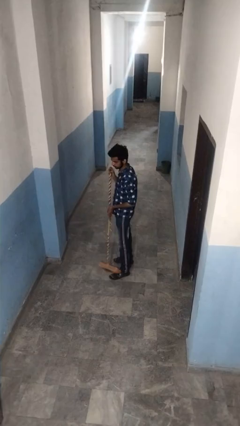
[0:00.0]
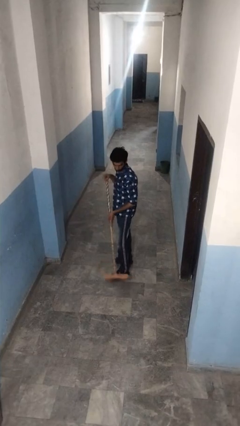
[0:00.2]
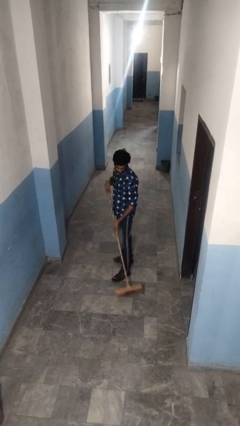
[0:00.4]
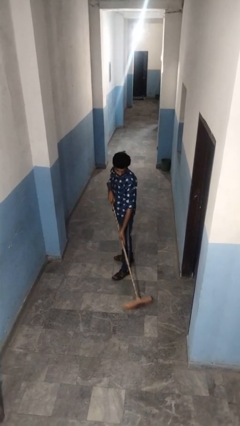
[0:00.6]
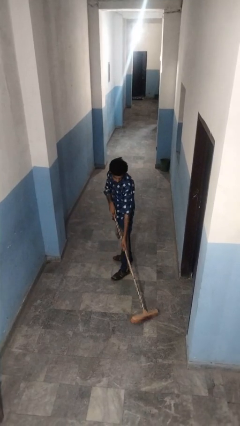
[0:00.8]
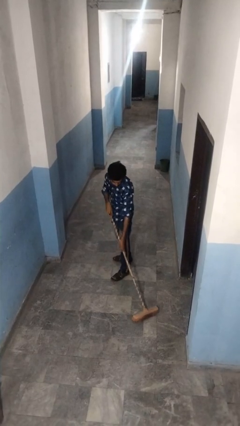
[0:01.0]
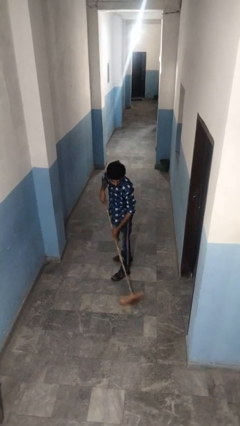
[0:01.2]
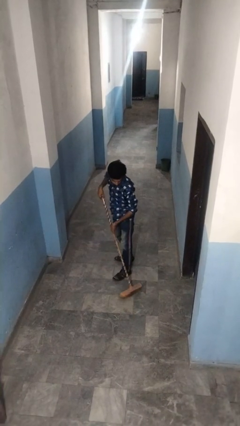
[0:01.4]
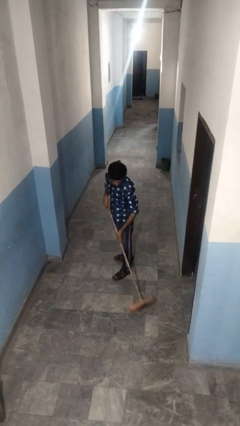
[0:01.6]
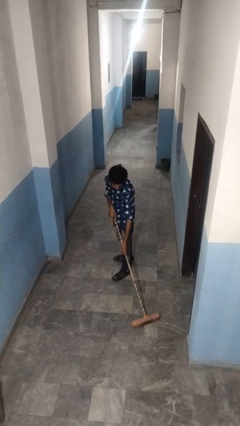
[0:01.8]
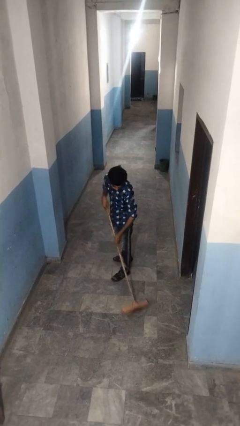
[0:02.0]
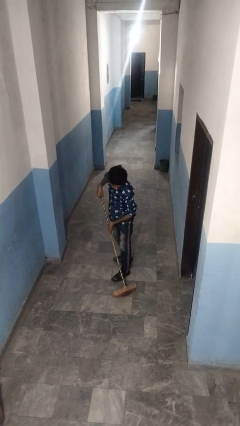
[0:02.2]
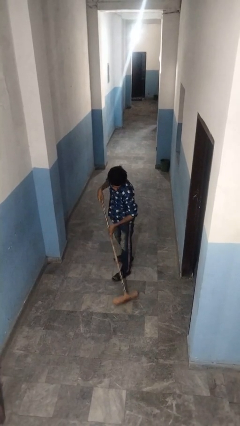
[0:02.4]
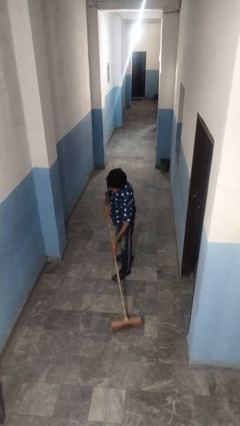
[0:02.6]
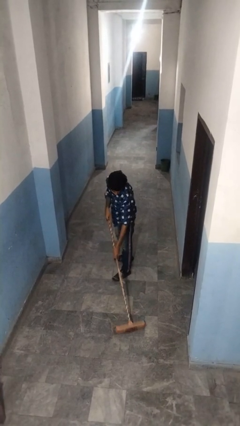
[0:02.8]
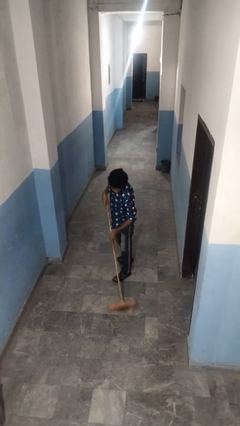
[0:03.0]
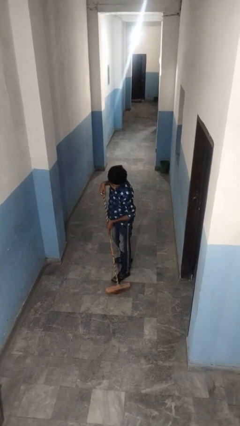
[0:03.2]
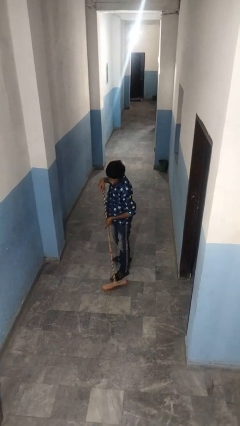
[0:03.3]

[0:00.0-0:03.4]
person sweeps floor

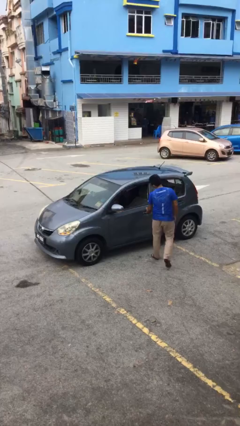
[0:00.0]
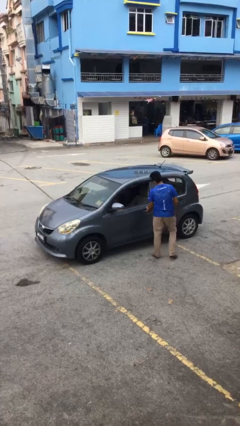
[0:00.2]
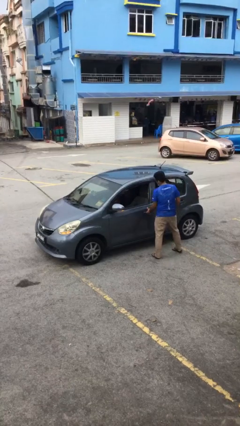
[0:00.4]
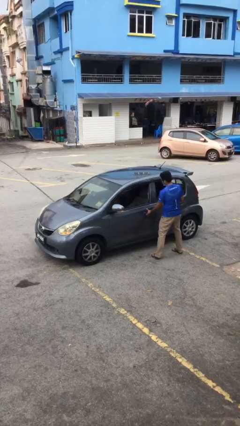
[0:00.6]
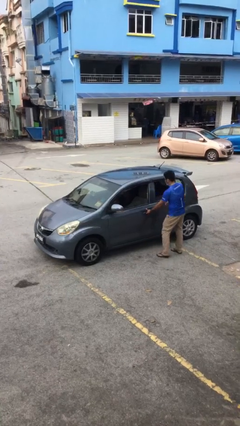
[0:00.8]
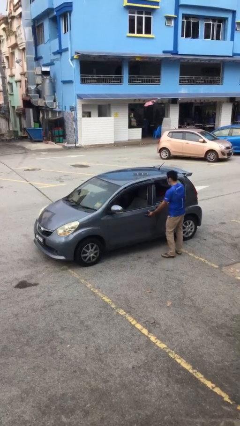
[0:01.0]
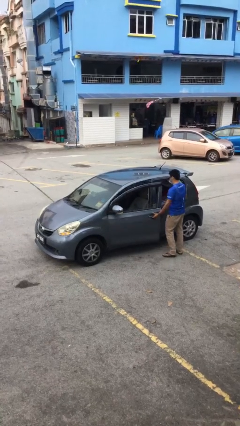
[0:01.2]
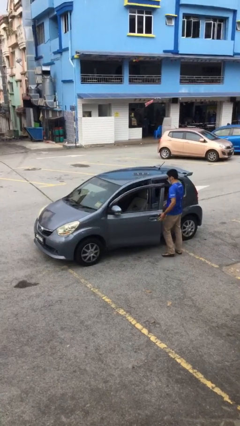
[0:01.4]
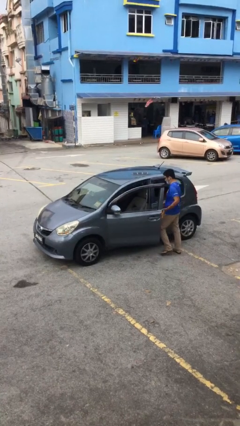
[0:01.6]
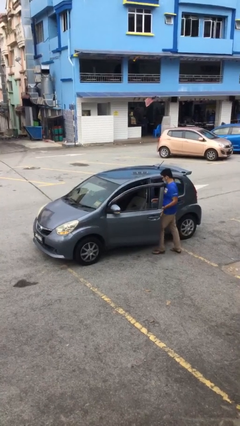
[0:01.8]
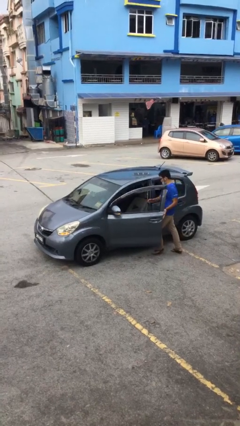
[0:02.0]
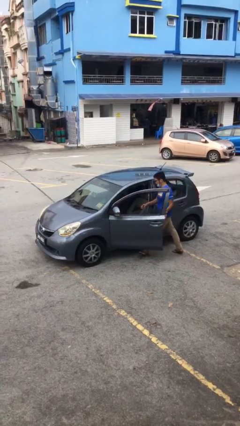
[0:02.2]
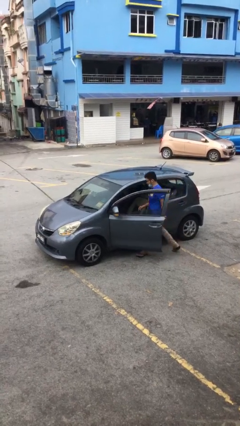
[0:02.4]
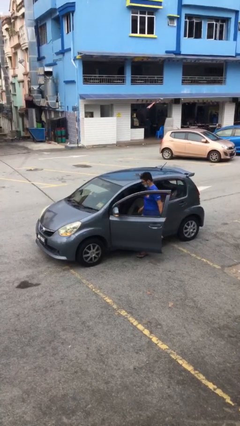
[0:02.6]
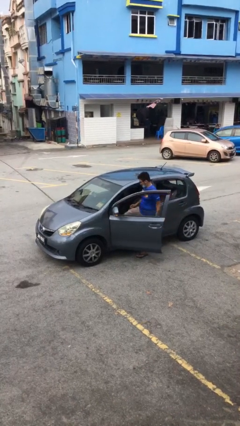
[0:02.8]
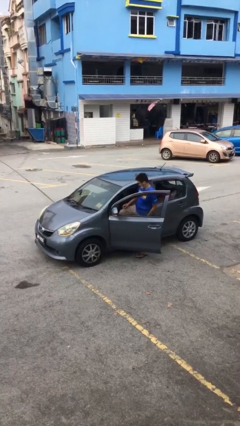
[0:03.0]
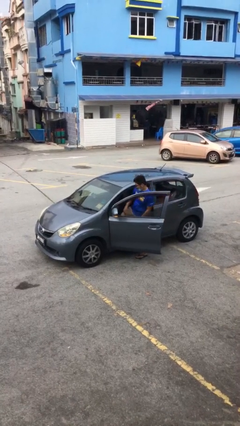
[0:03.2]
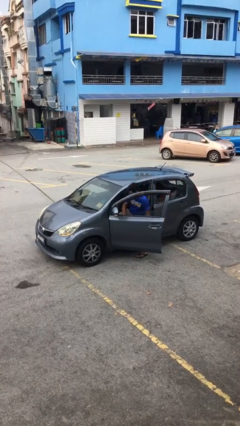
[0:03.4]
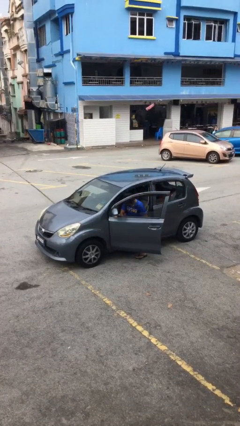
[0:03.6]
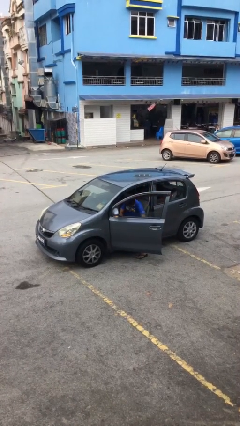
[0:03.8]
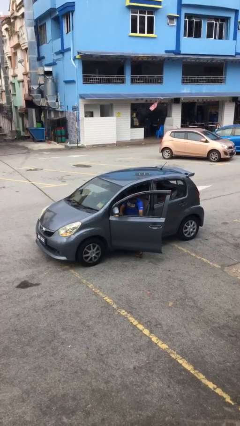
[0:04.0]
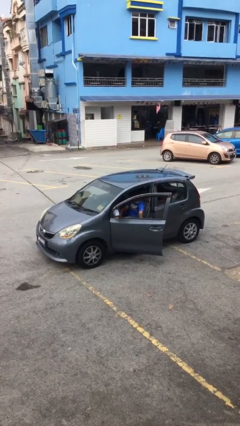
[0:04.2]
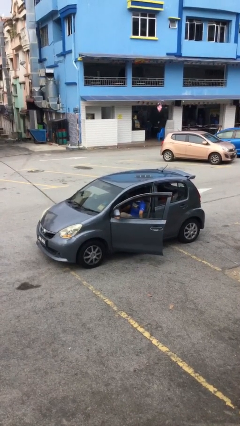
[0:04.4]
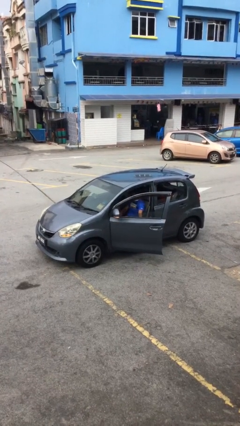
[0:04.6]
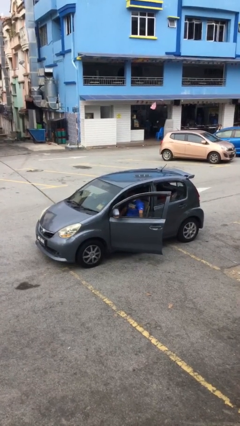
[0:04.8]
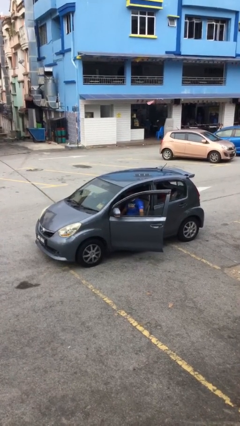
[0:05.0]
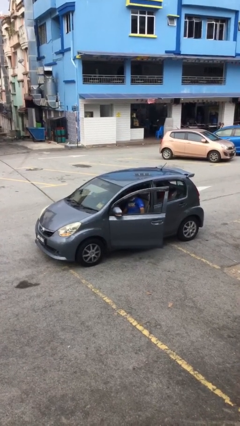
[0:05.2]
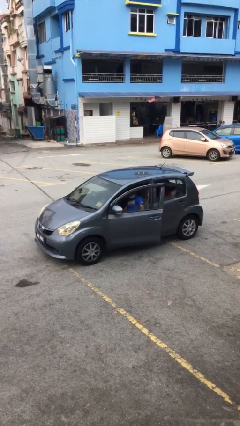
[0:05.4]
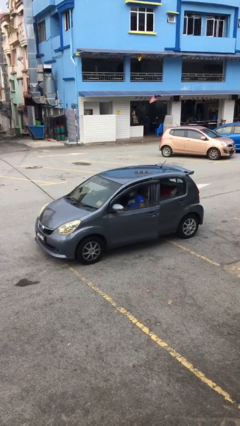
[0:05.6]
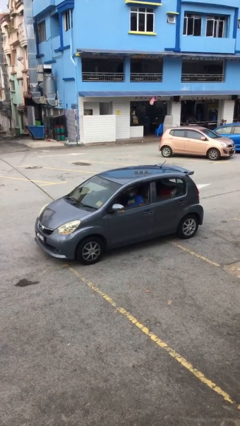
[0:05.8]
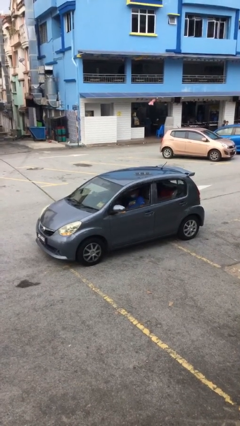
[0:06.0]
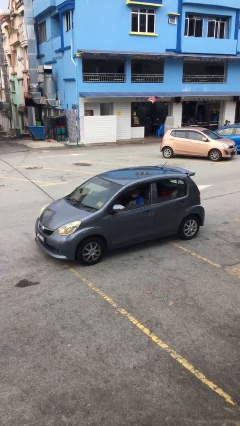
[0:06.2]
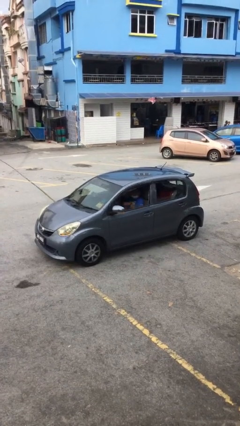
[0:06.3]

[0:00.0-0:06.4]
car picks up person

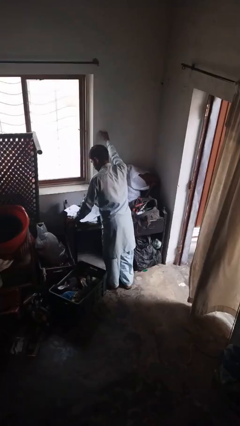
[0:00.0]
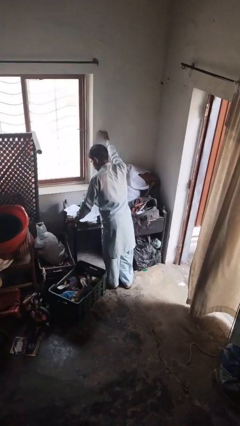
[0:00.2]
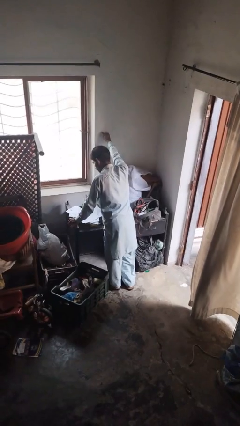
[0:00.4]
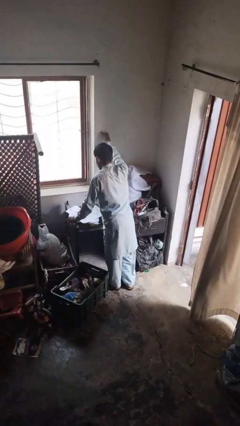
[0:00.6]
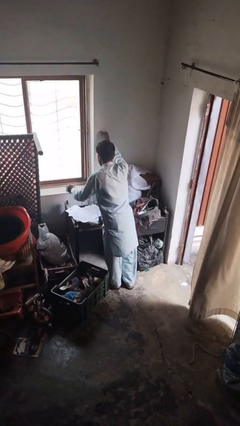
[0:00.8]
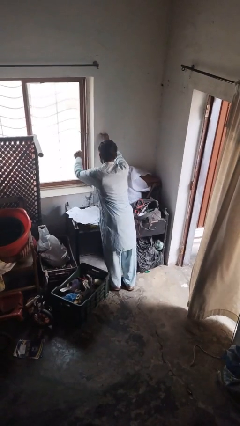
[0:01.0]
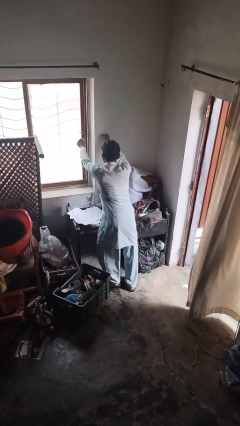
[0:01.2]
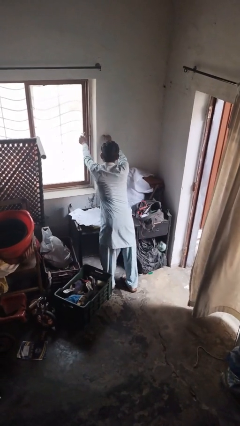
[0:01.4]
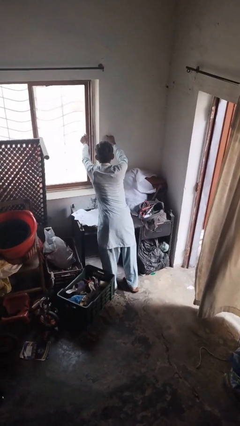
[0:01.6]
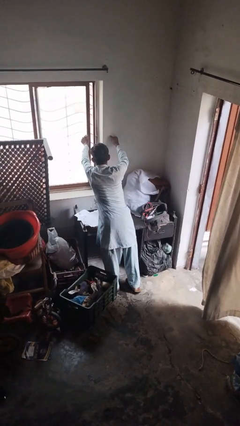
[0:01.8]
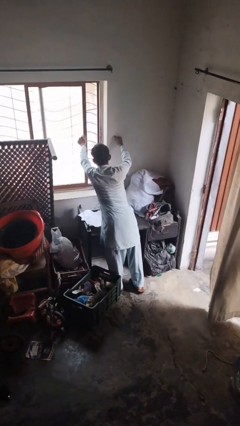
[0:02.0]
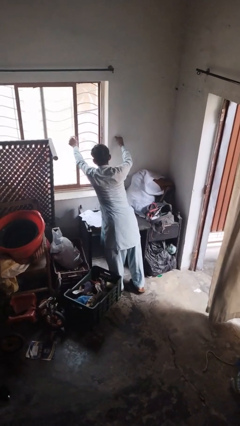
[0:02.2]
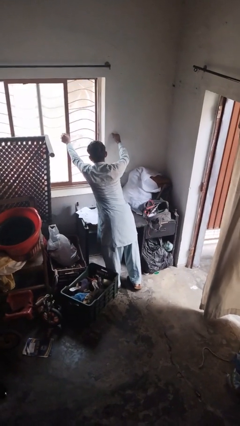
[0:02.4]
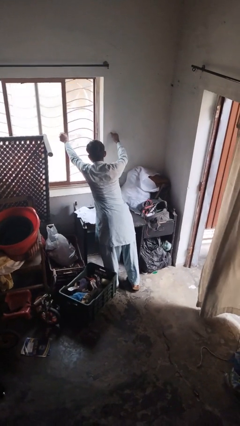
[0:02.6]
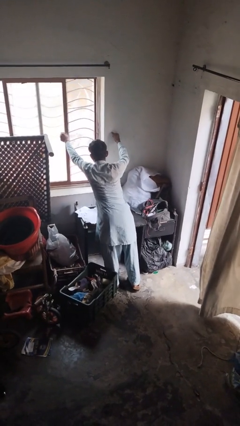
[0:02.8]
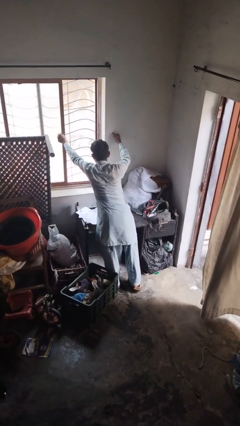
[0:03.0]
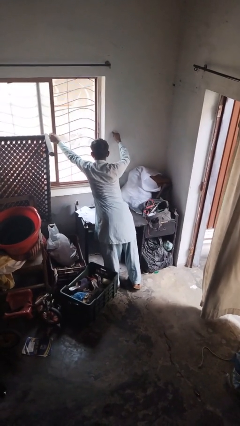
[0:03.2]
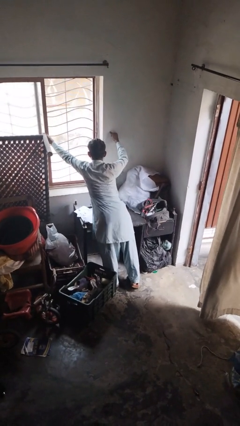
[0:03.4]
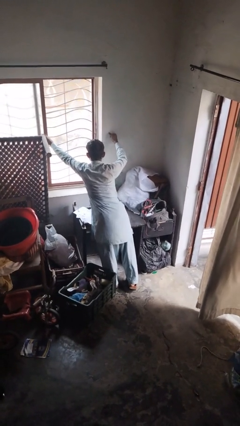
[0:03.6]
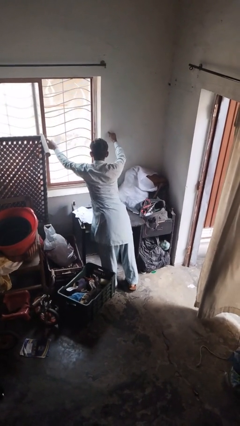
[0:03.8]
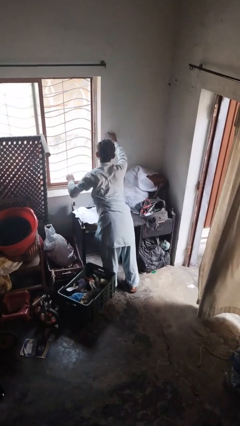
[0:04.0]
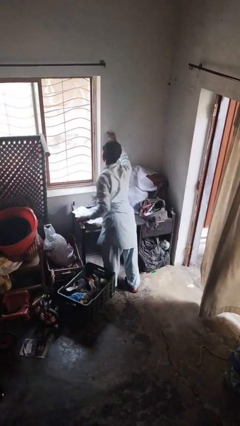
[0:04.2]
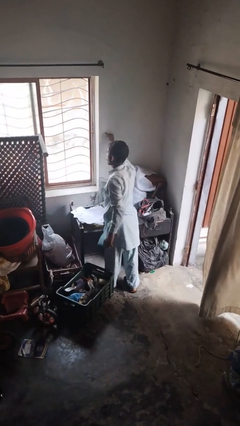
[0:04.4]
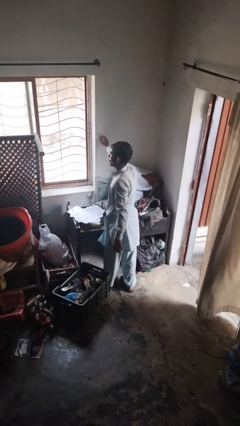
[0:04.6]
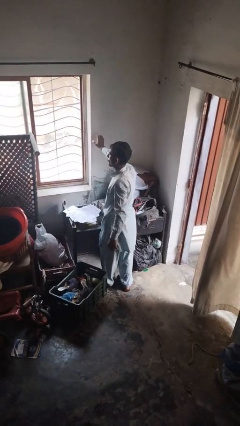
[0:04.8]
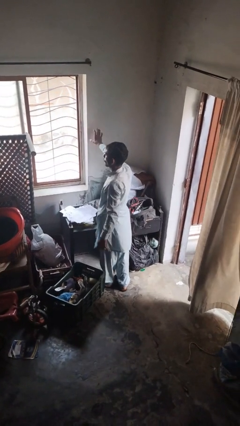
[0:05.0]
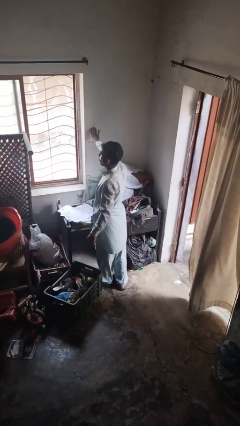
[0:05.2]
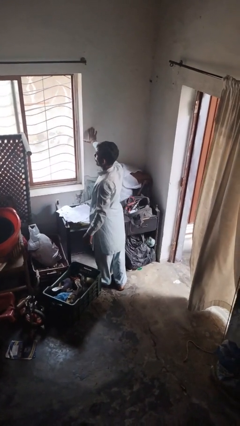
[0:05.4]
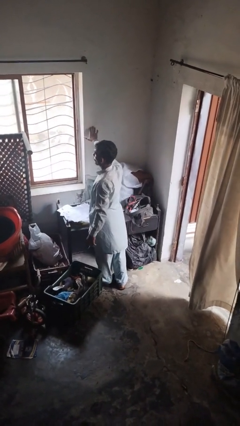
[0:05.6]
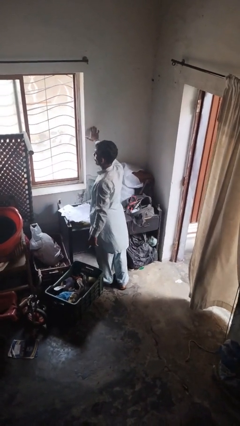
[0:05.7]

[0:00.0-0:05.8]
person opens home window

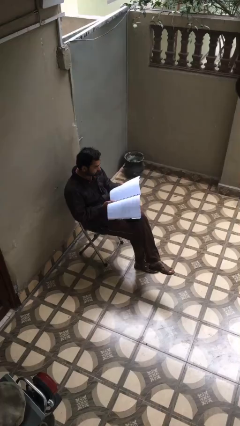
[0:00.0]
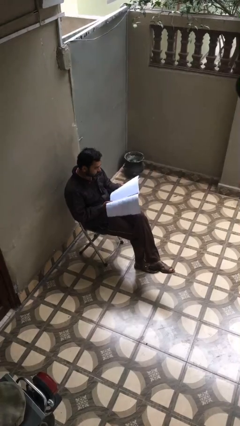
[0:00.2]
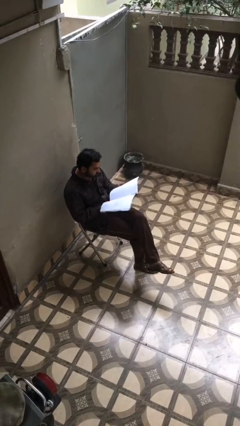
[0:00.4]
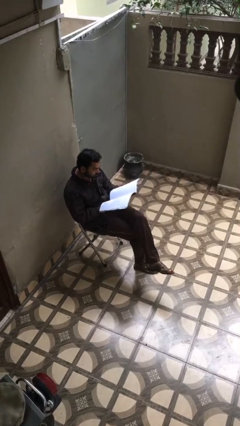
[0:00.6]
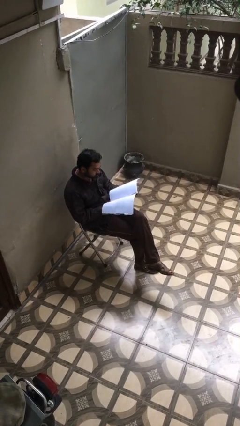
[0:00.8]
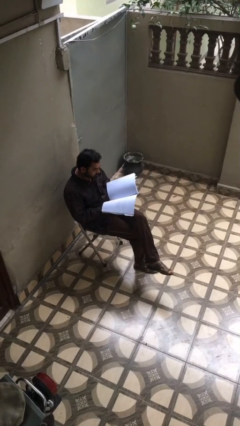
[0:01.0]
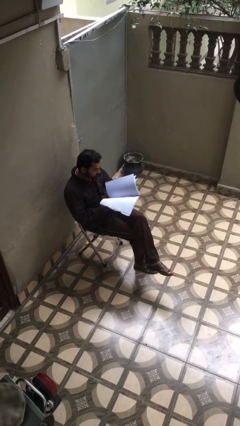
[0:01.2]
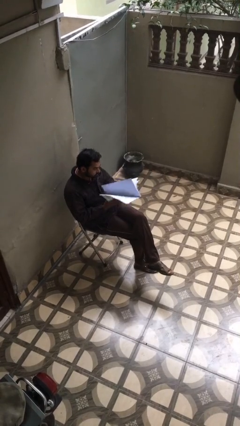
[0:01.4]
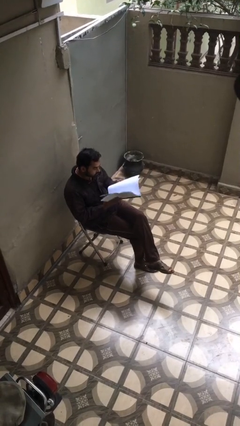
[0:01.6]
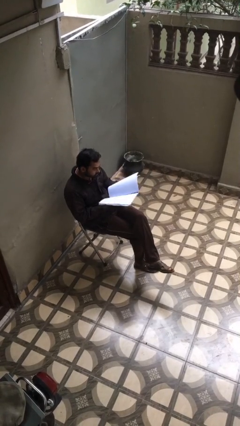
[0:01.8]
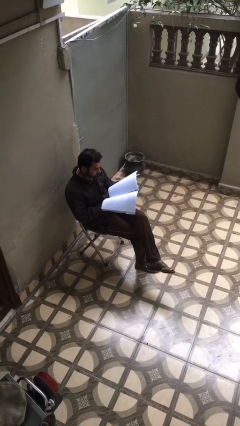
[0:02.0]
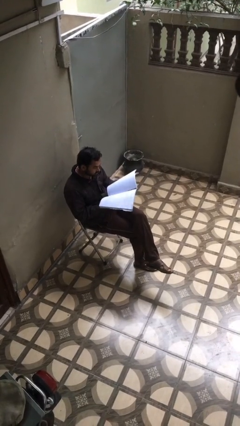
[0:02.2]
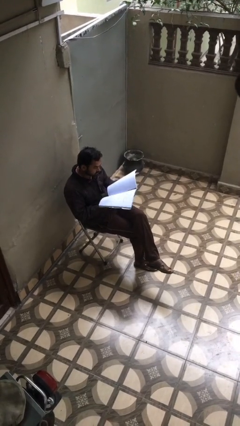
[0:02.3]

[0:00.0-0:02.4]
person reads document
